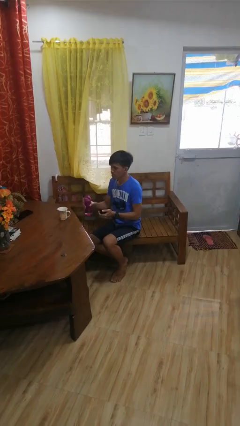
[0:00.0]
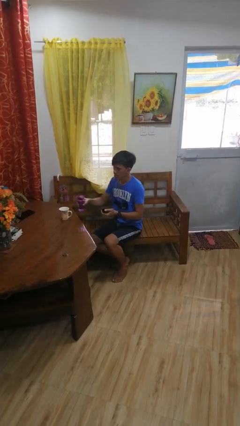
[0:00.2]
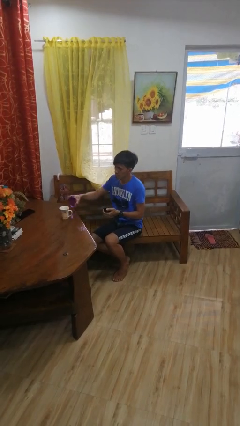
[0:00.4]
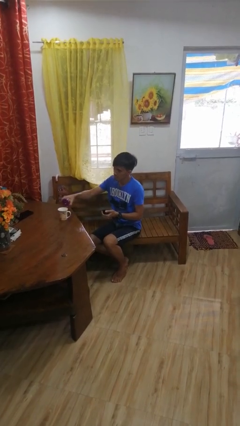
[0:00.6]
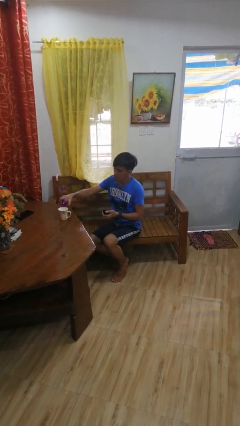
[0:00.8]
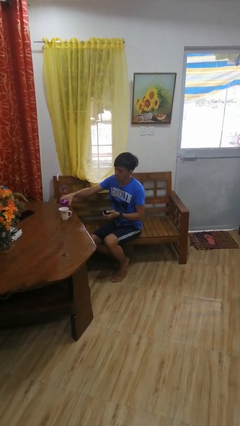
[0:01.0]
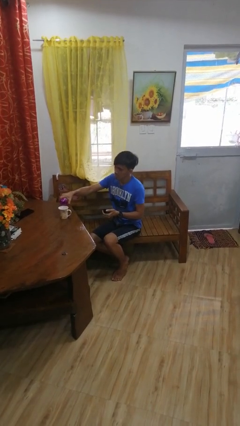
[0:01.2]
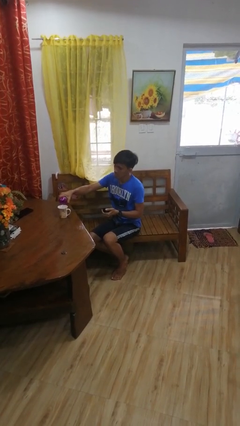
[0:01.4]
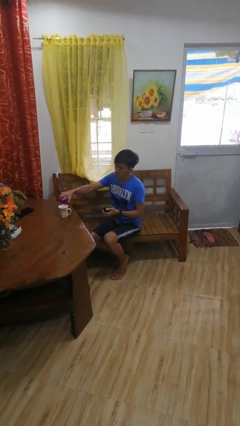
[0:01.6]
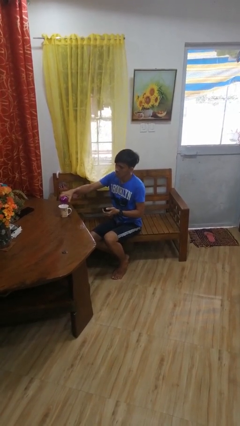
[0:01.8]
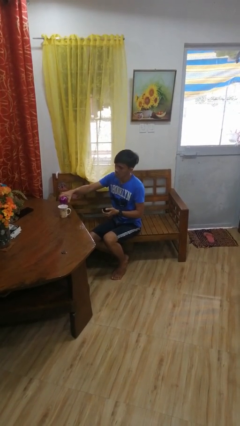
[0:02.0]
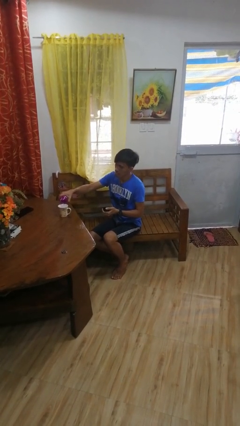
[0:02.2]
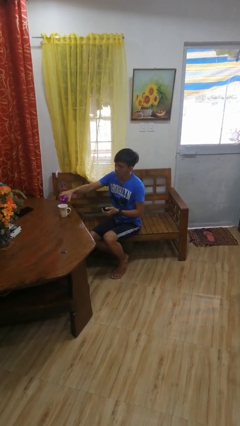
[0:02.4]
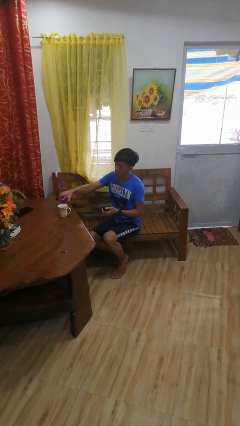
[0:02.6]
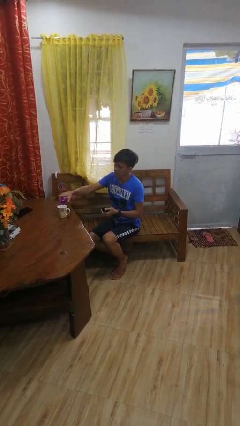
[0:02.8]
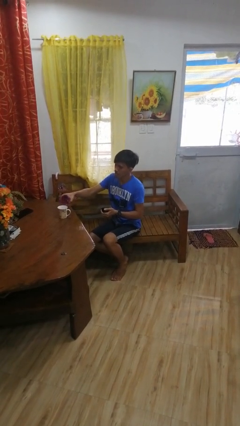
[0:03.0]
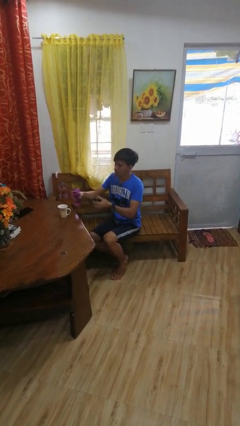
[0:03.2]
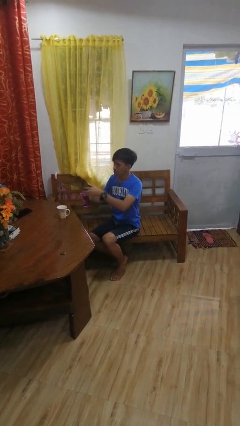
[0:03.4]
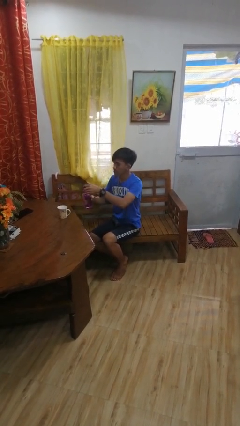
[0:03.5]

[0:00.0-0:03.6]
person pours liquid into cup

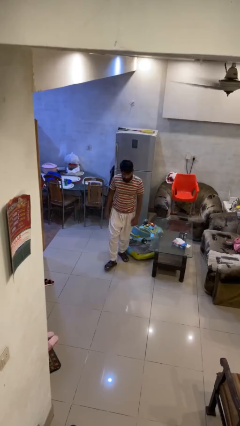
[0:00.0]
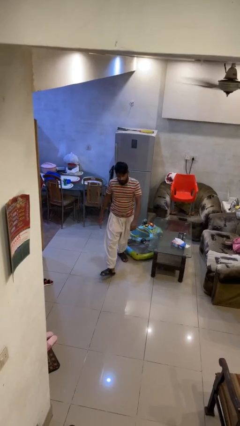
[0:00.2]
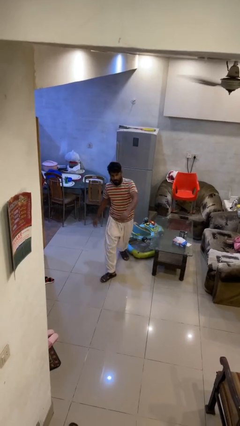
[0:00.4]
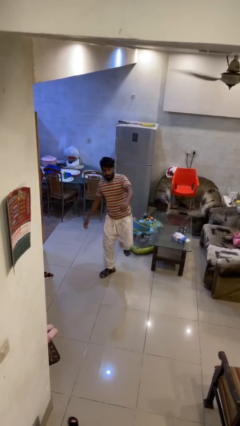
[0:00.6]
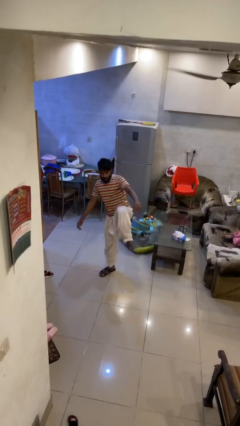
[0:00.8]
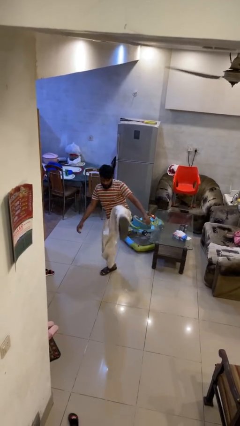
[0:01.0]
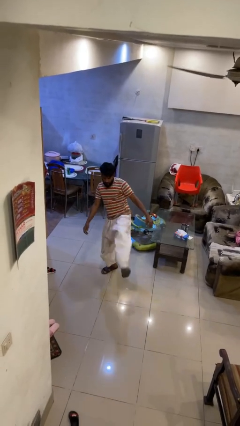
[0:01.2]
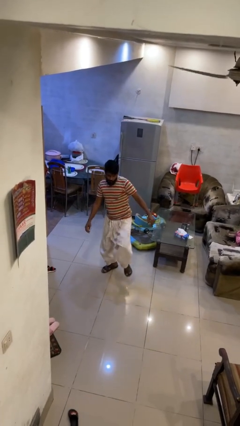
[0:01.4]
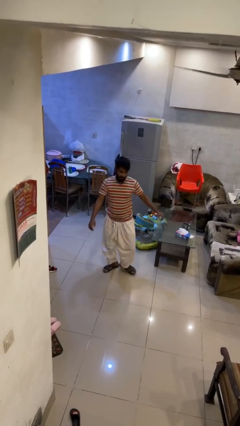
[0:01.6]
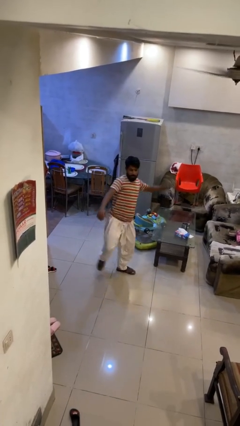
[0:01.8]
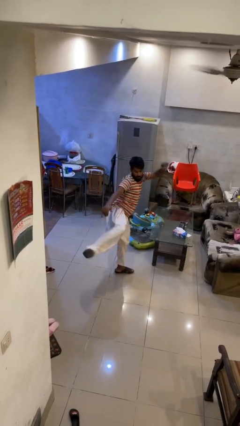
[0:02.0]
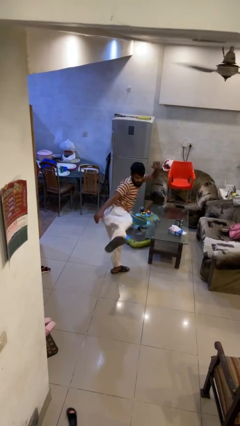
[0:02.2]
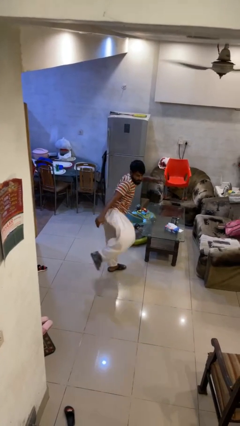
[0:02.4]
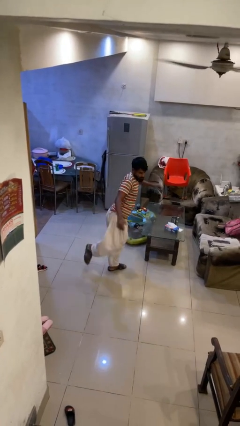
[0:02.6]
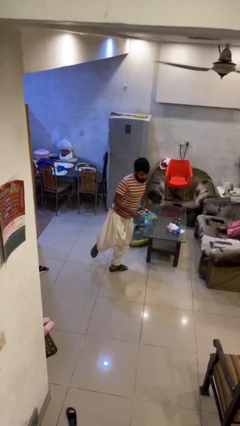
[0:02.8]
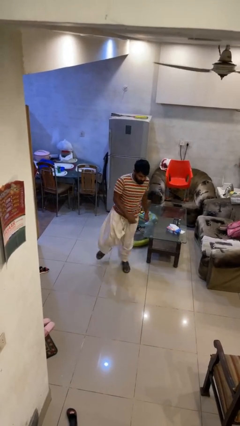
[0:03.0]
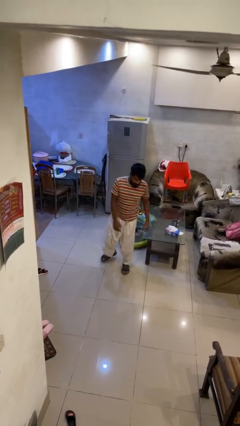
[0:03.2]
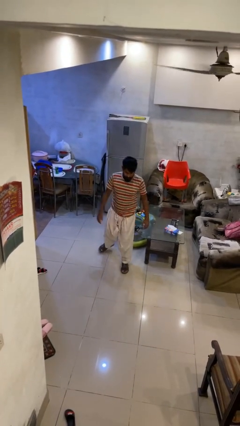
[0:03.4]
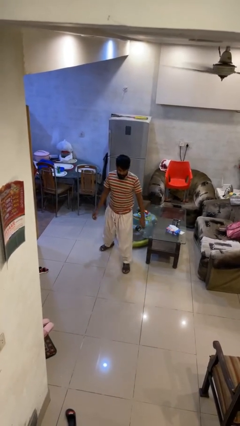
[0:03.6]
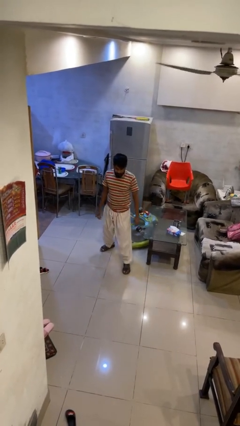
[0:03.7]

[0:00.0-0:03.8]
person karate kicks

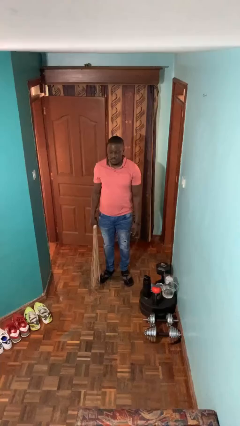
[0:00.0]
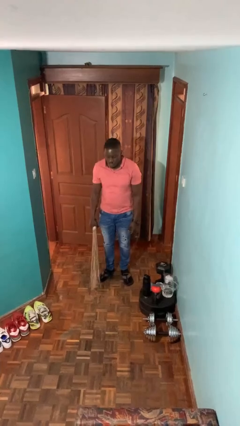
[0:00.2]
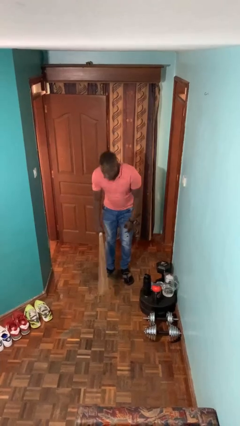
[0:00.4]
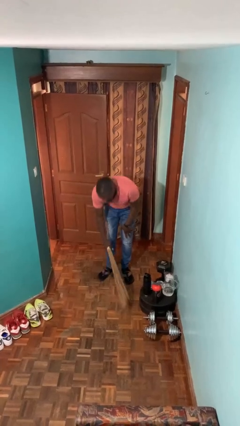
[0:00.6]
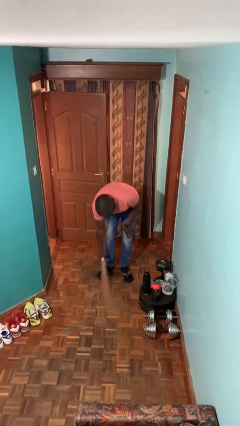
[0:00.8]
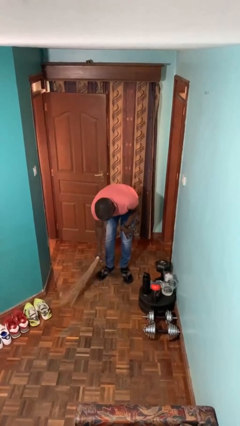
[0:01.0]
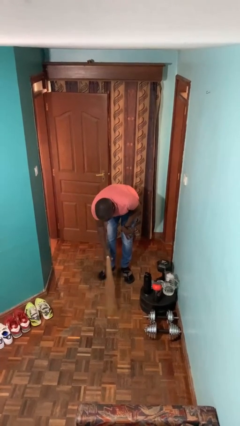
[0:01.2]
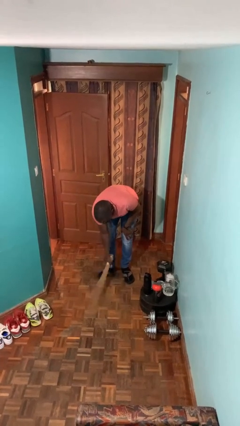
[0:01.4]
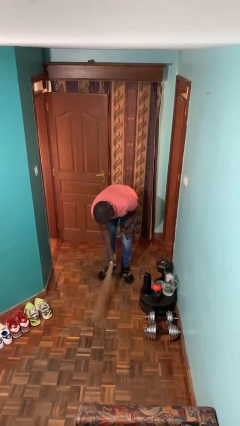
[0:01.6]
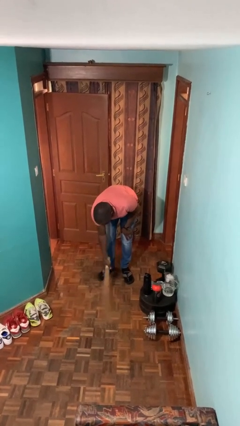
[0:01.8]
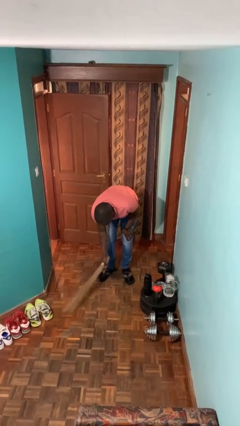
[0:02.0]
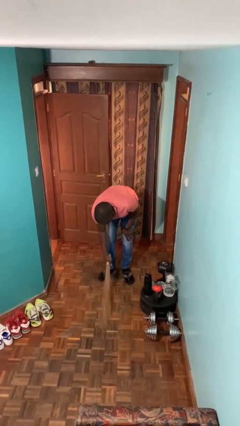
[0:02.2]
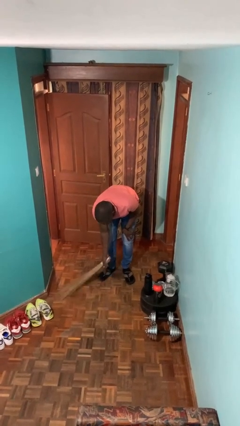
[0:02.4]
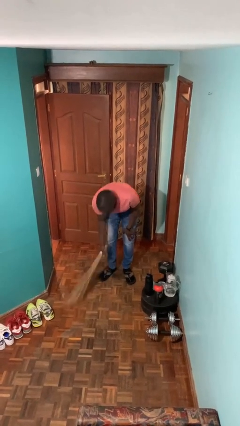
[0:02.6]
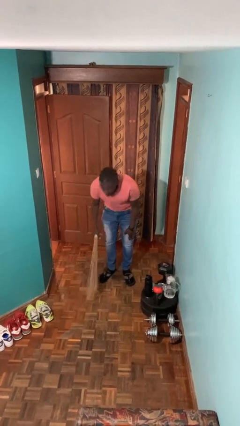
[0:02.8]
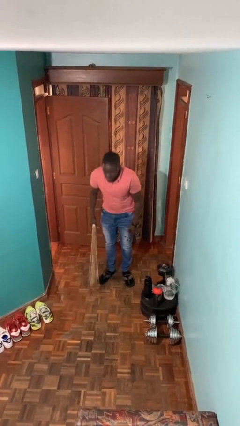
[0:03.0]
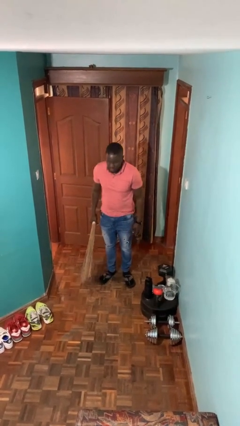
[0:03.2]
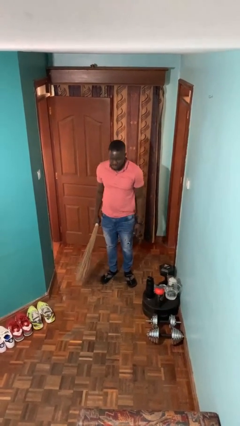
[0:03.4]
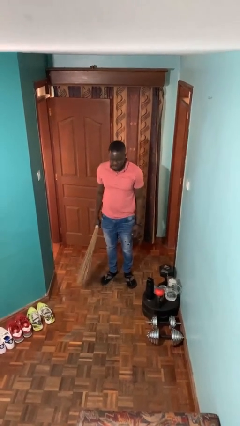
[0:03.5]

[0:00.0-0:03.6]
person sweeps floor

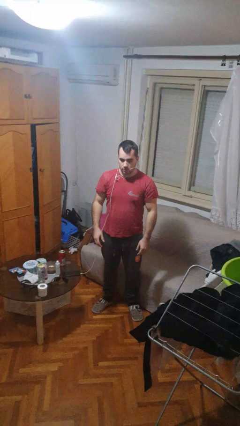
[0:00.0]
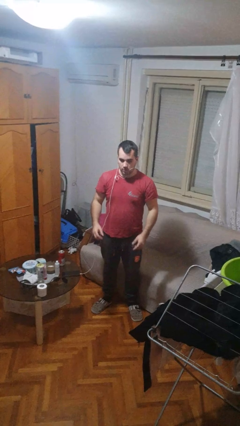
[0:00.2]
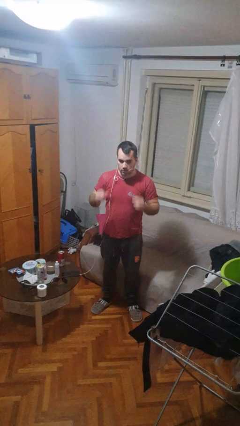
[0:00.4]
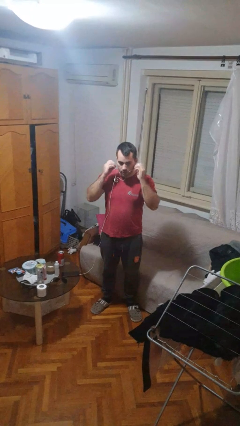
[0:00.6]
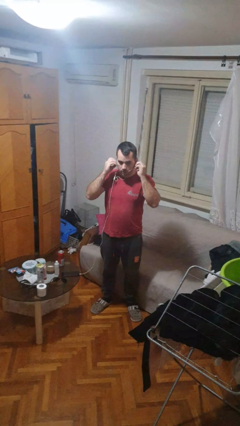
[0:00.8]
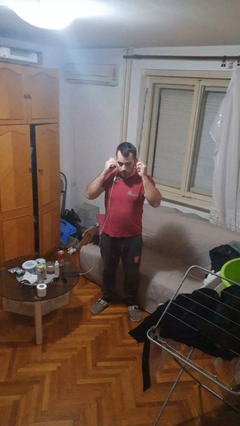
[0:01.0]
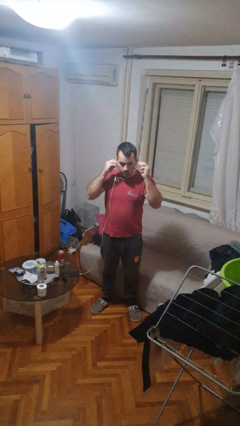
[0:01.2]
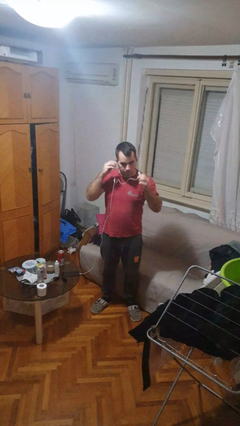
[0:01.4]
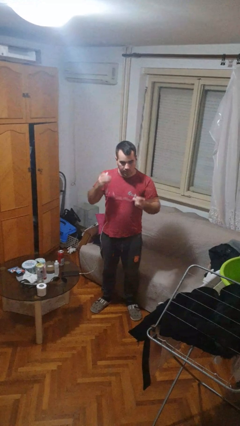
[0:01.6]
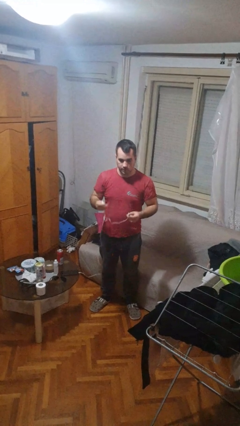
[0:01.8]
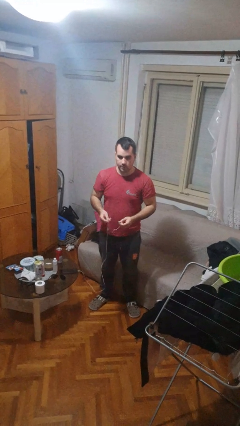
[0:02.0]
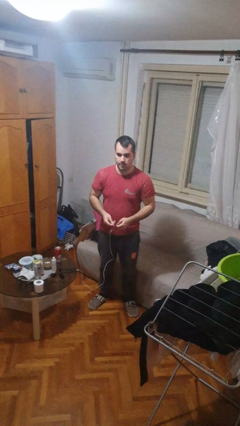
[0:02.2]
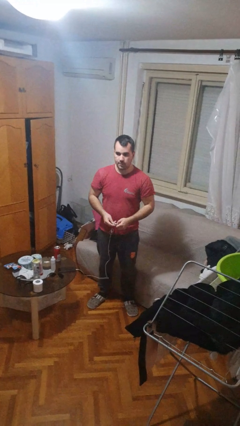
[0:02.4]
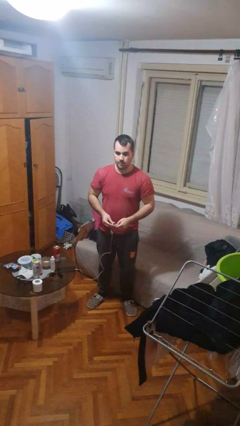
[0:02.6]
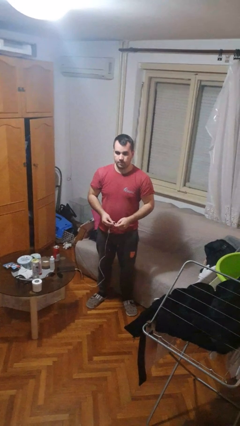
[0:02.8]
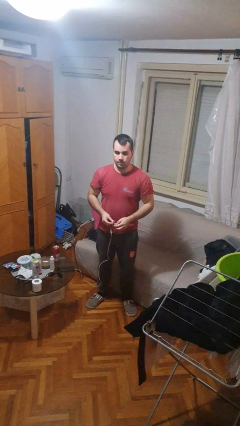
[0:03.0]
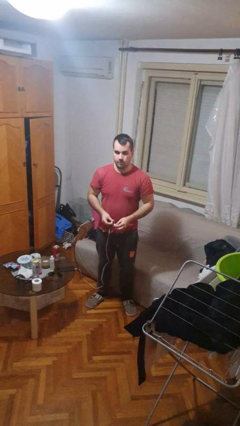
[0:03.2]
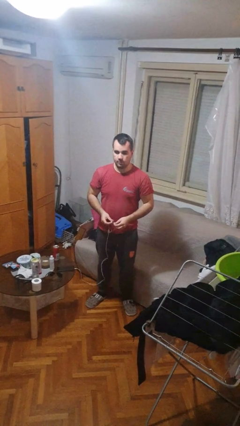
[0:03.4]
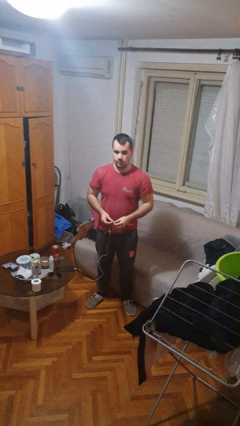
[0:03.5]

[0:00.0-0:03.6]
person takes off headphones

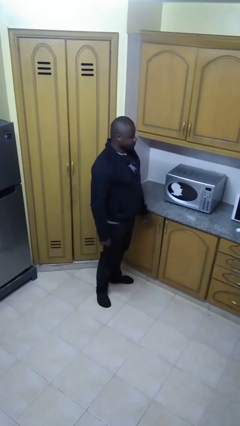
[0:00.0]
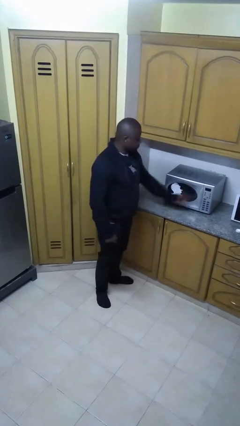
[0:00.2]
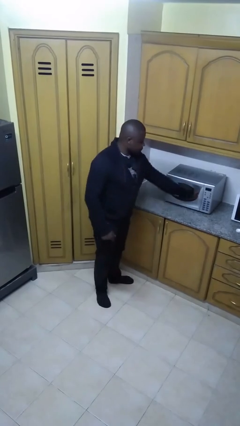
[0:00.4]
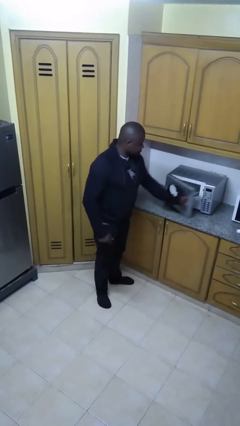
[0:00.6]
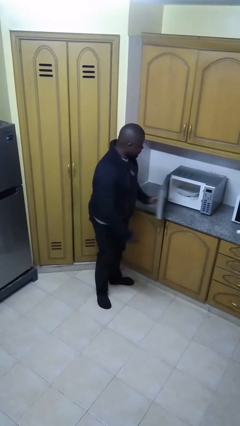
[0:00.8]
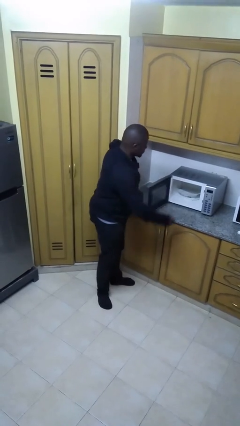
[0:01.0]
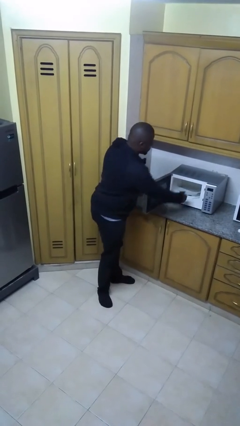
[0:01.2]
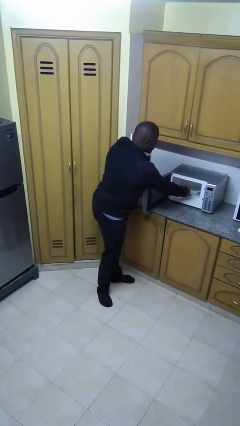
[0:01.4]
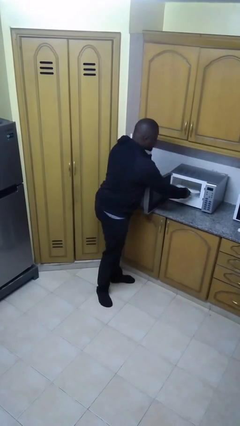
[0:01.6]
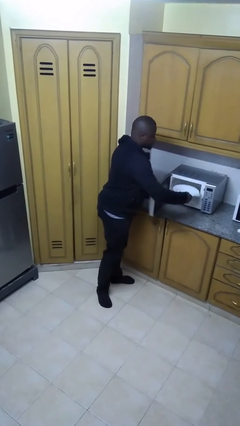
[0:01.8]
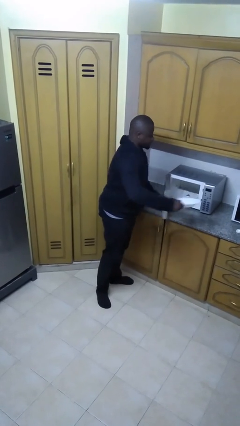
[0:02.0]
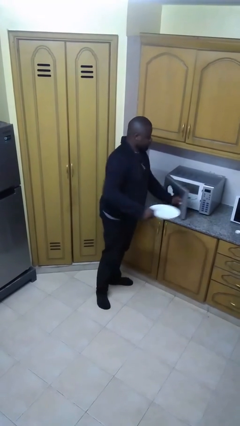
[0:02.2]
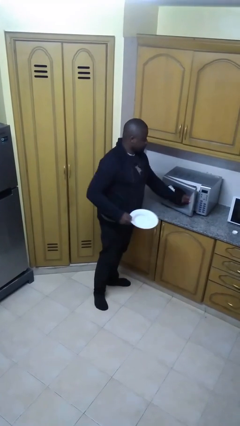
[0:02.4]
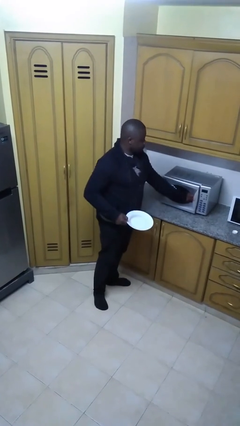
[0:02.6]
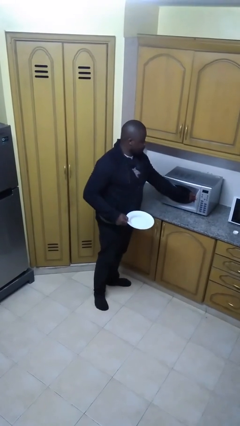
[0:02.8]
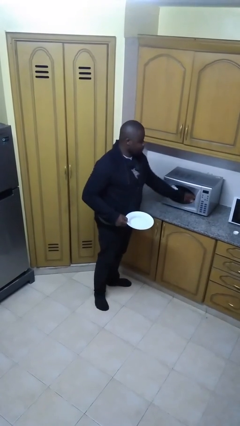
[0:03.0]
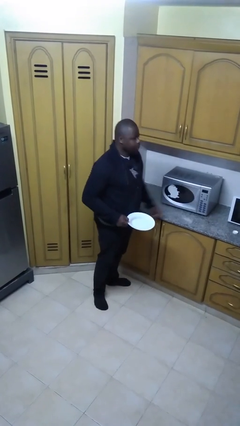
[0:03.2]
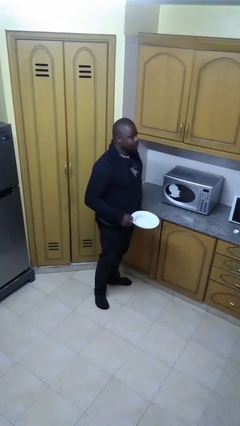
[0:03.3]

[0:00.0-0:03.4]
person takes object from microwave
